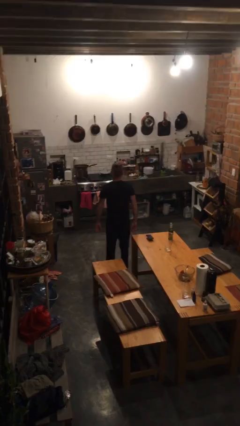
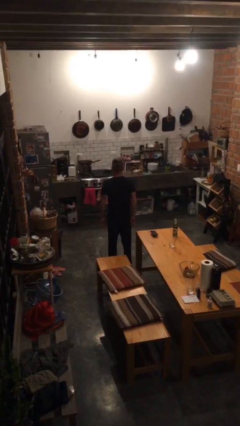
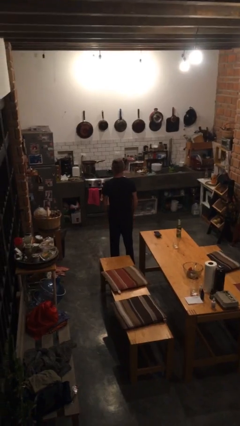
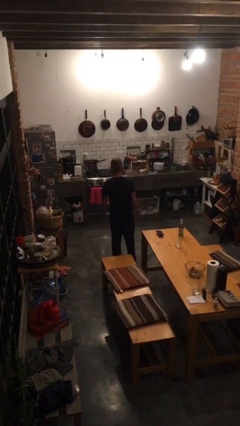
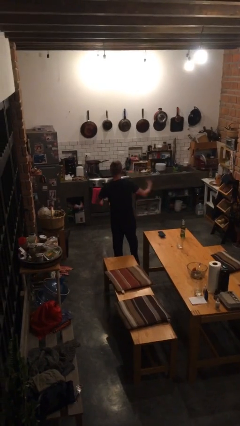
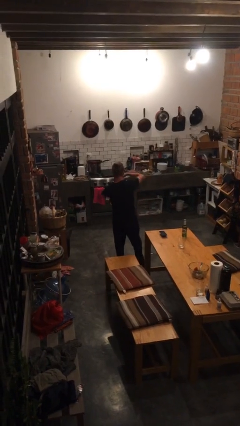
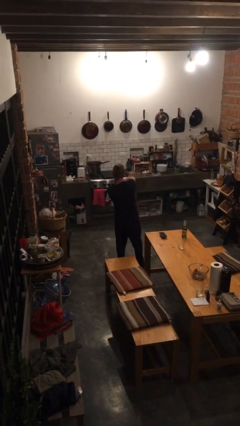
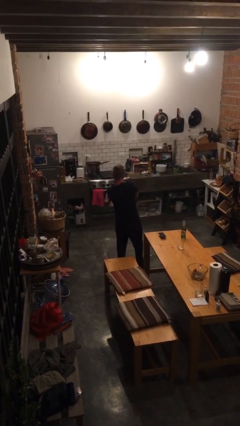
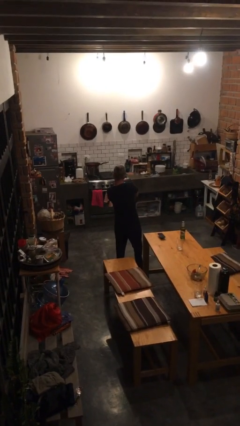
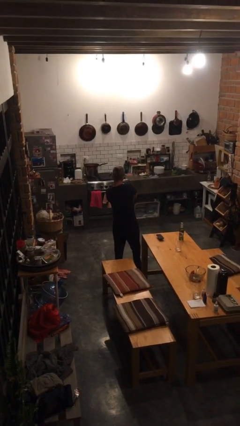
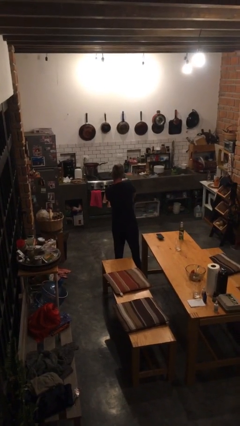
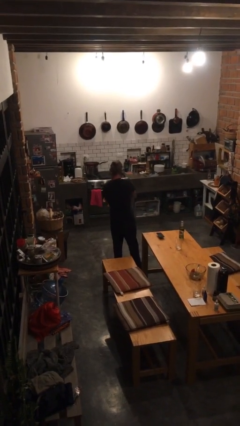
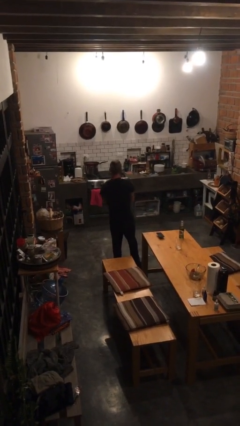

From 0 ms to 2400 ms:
person gestures arms x

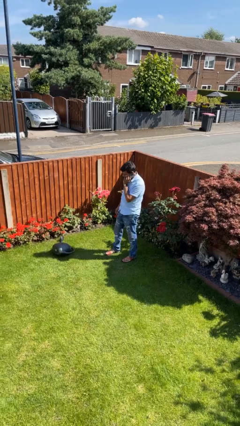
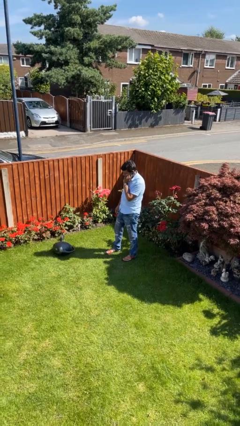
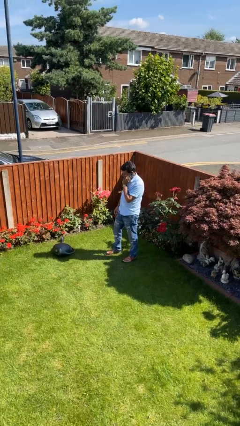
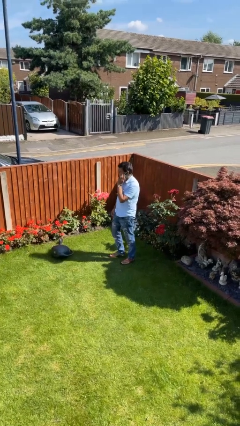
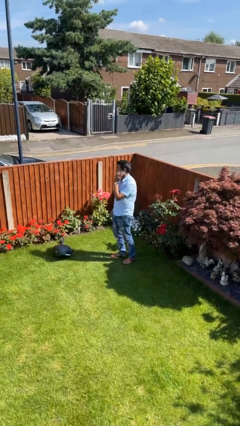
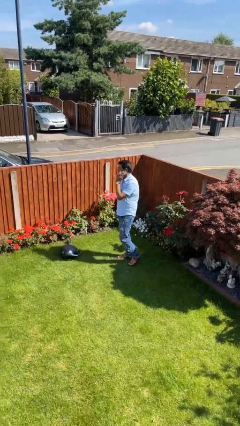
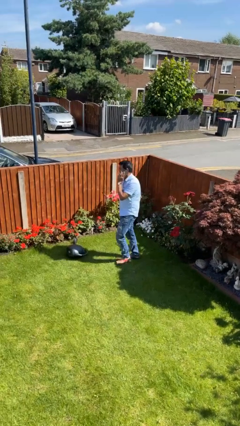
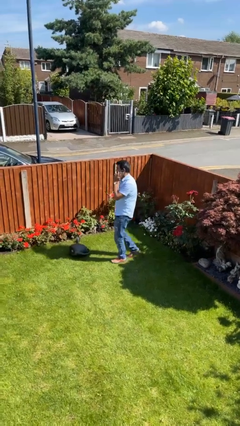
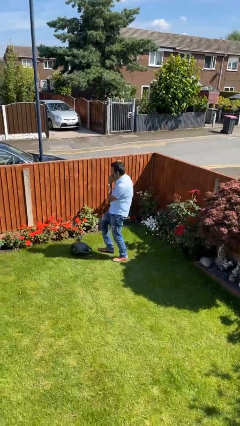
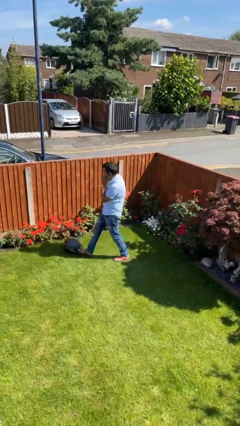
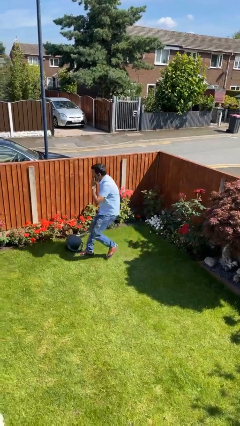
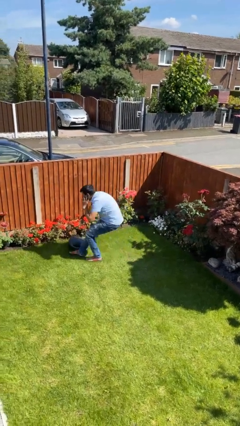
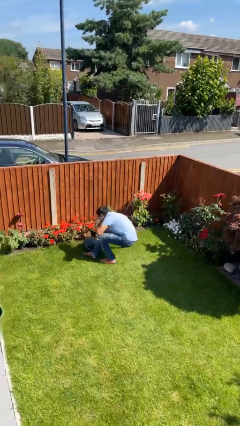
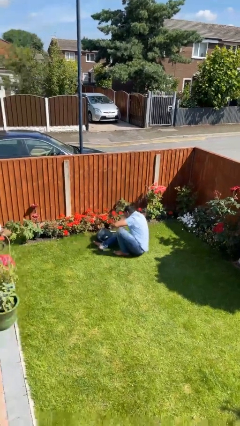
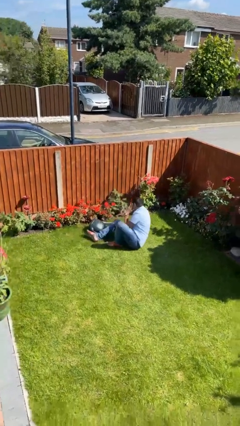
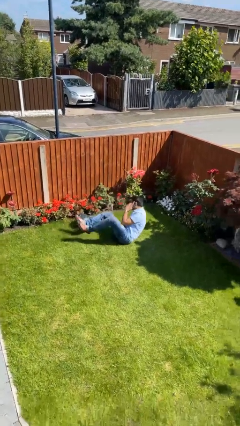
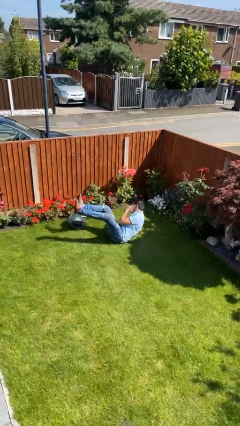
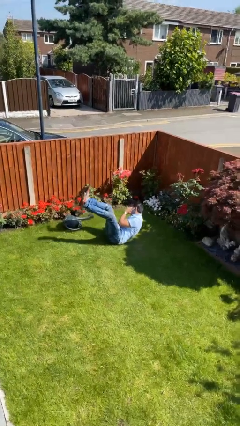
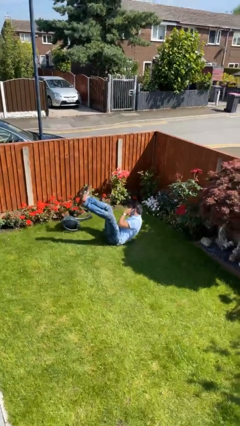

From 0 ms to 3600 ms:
person trips on object on floor

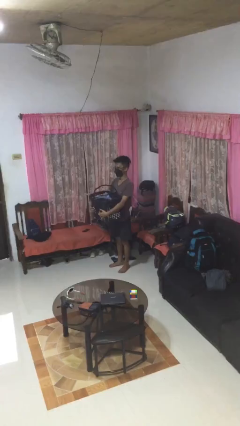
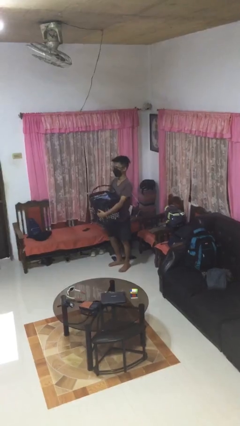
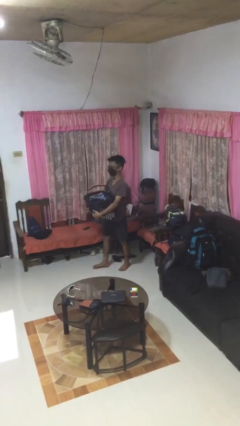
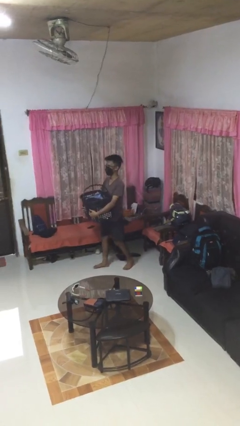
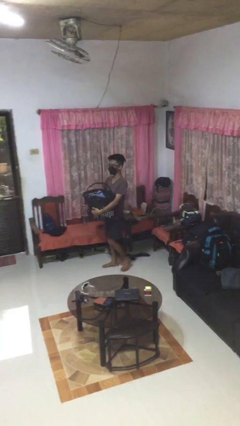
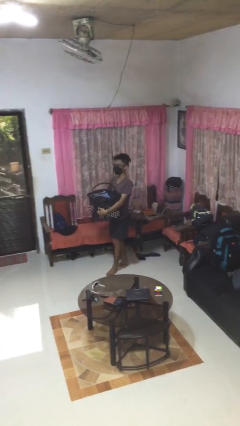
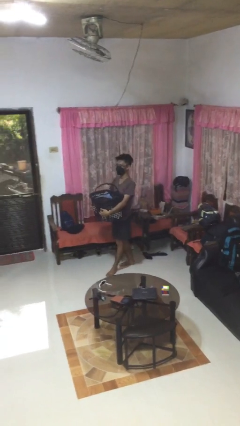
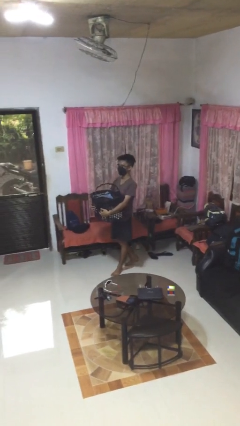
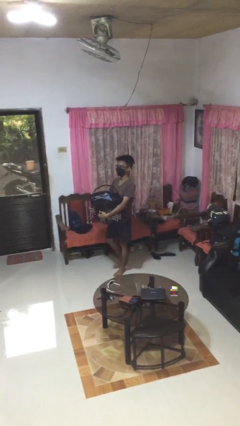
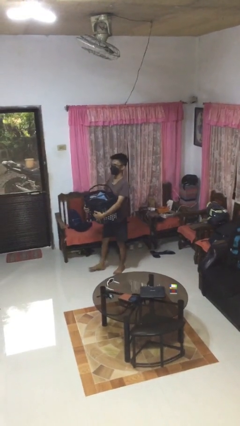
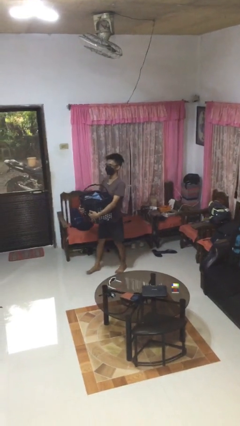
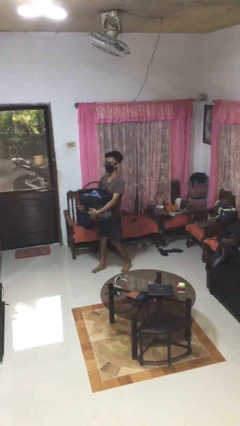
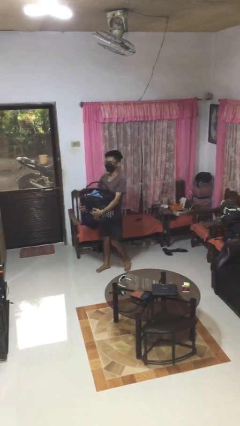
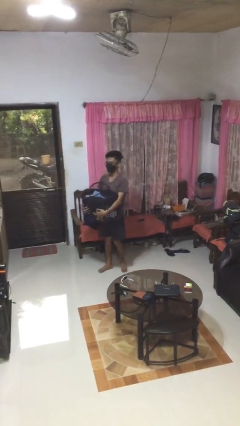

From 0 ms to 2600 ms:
person carries laundry basket

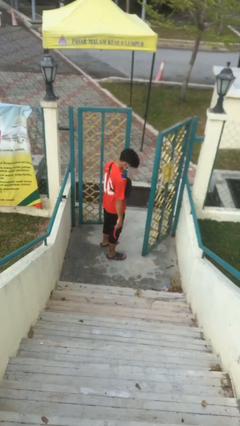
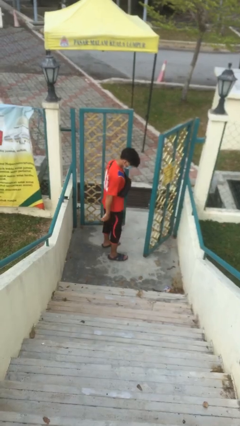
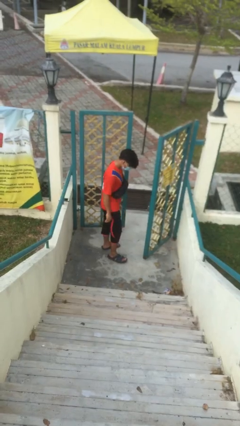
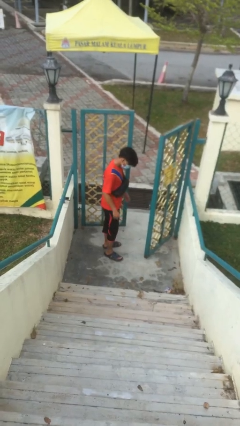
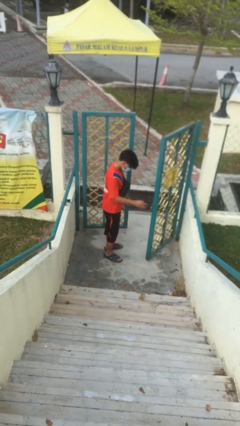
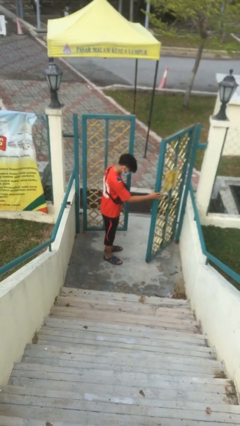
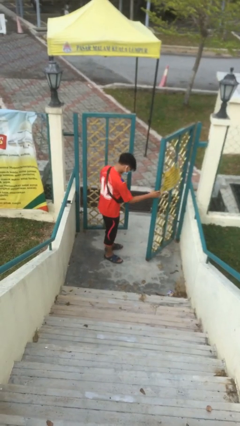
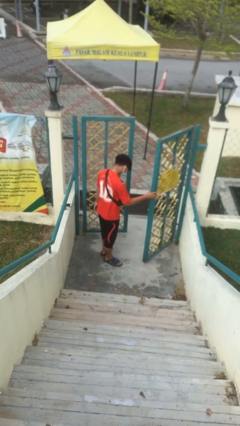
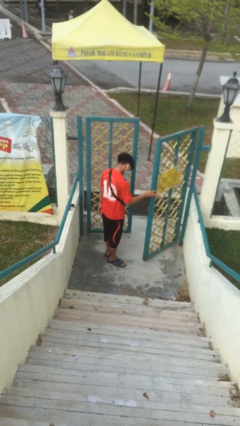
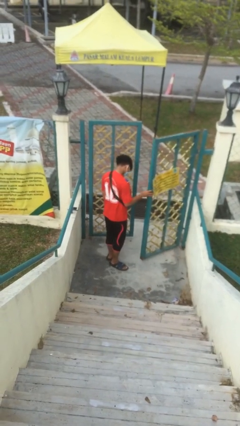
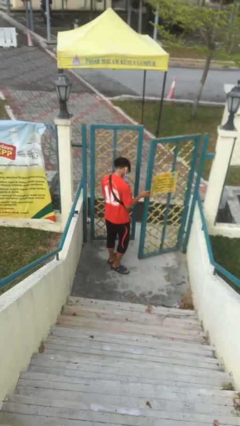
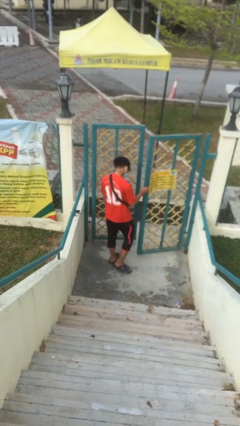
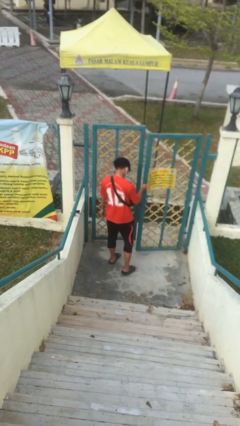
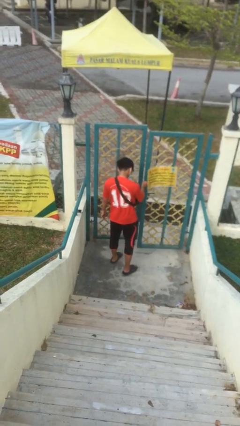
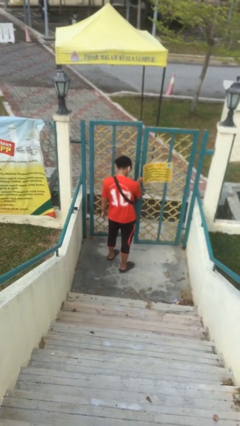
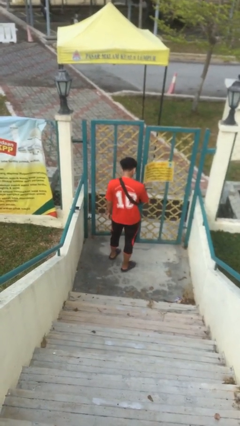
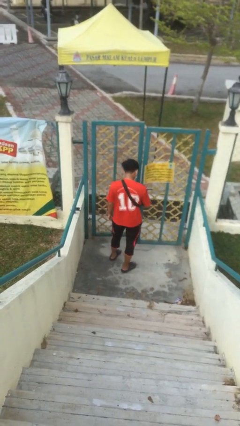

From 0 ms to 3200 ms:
person closes facility door

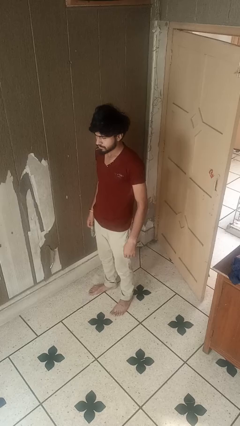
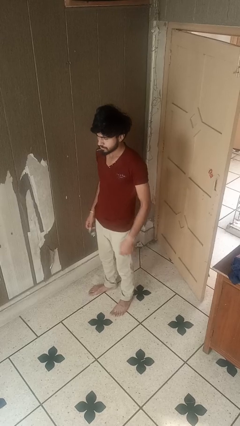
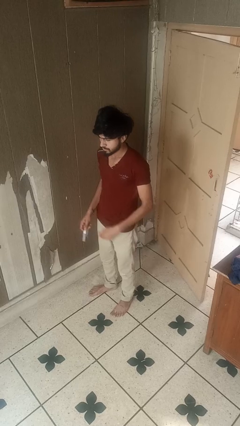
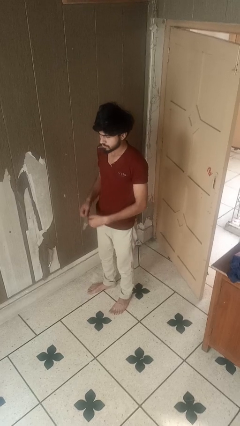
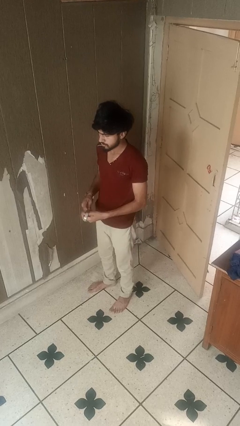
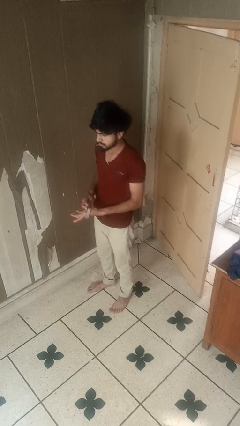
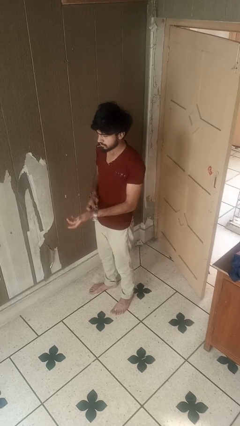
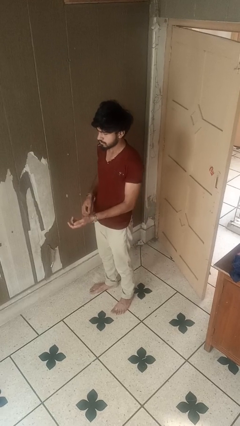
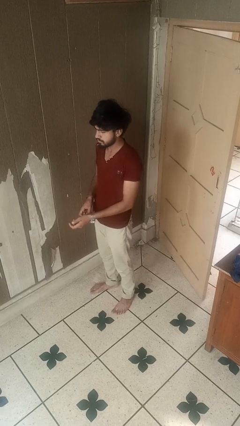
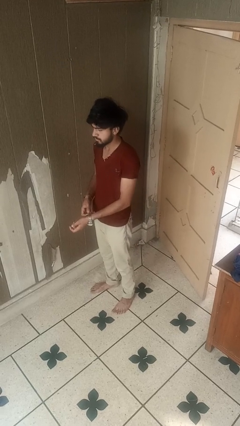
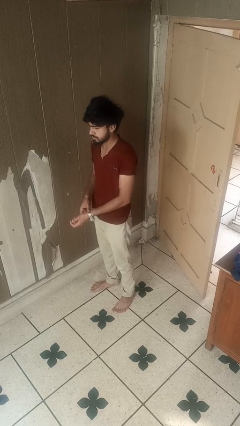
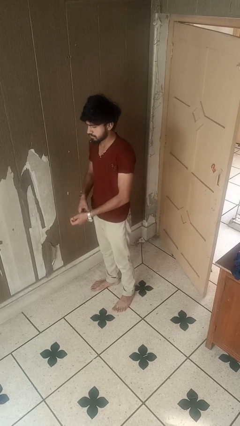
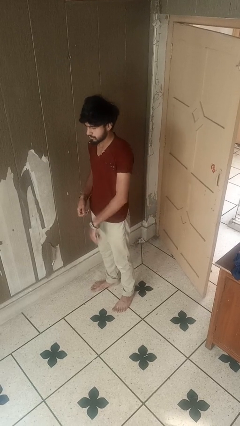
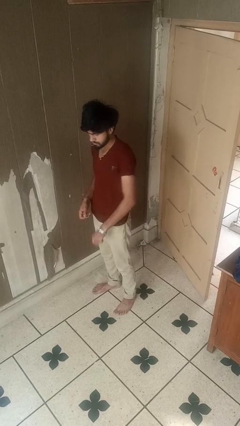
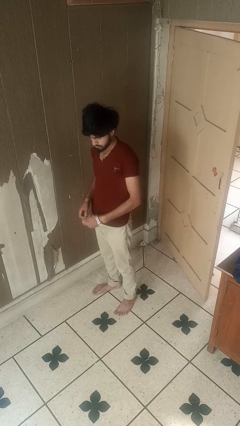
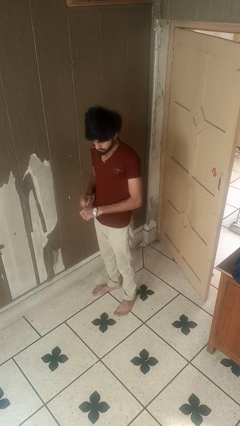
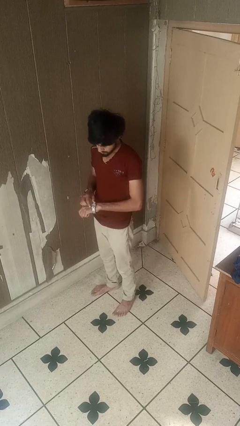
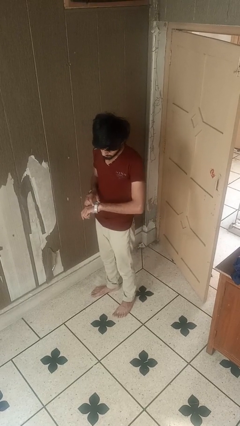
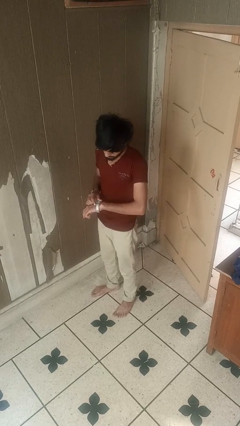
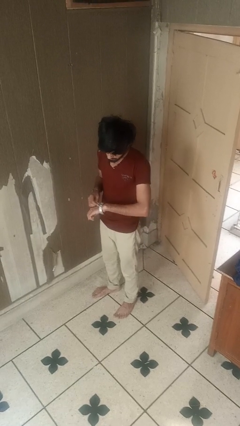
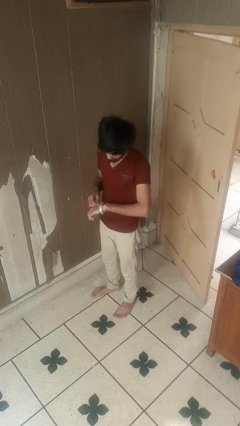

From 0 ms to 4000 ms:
person puts on wristwatch

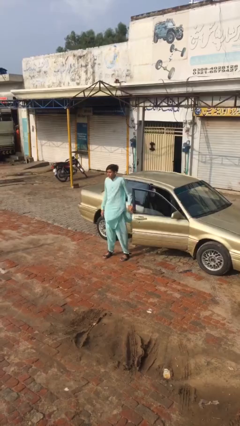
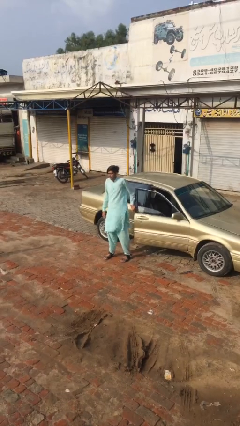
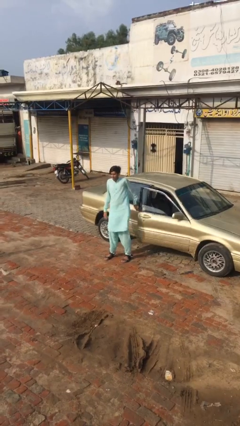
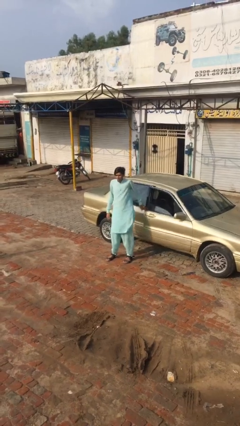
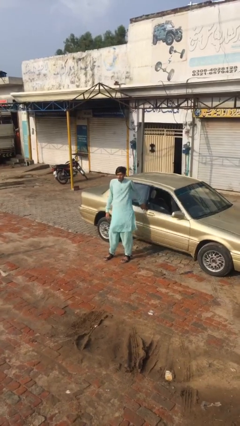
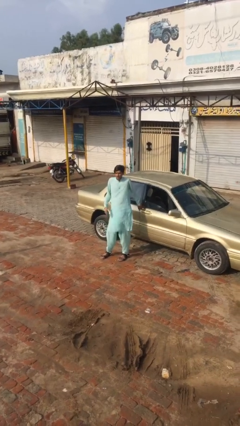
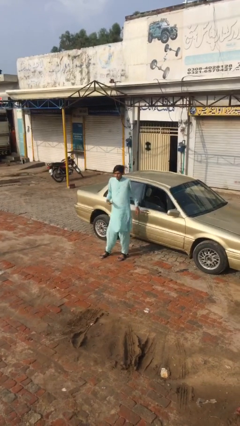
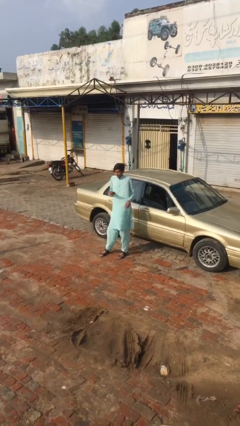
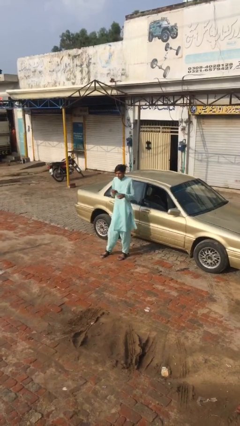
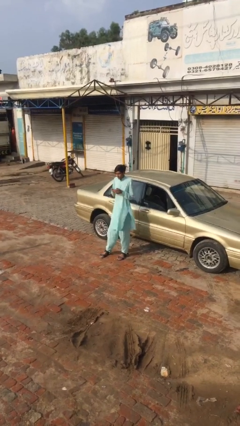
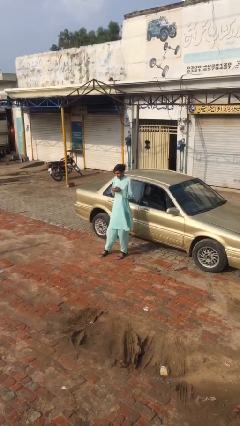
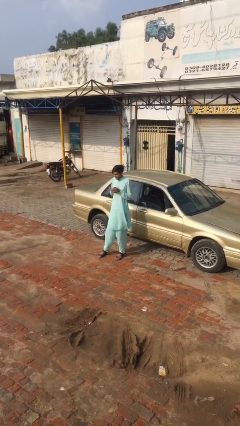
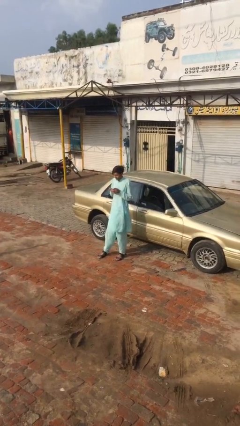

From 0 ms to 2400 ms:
person closes car door
